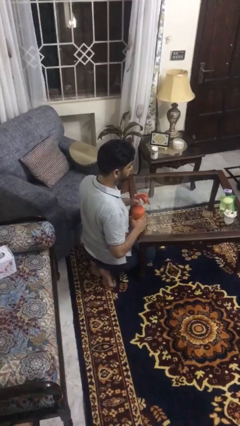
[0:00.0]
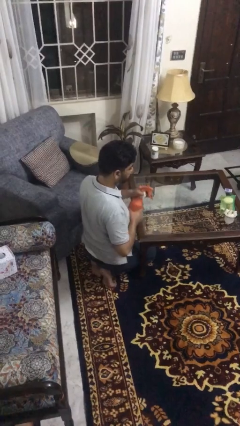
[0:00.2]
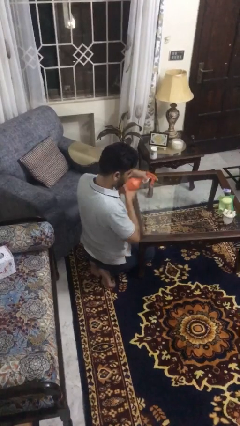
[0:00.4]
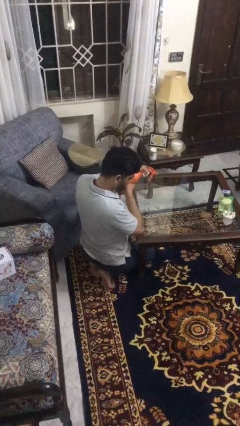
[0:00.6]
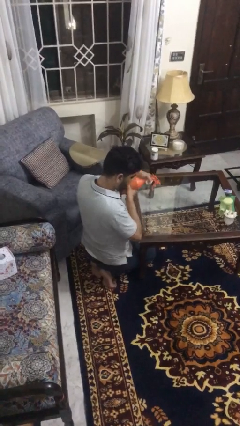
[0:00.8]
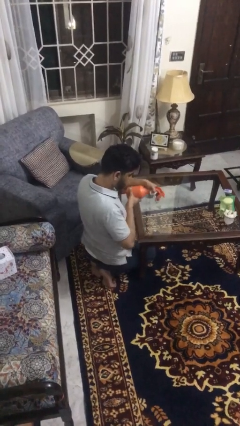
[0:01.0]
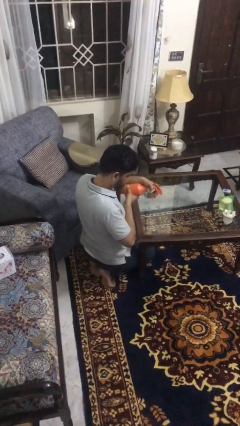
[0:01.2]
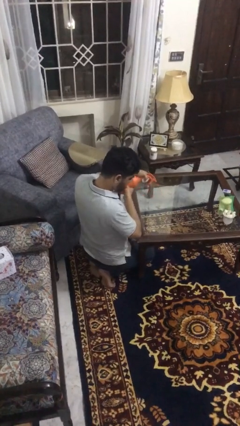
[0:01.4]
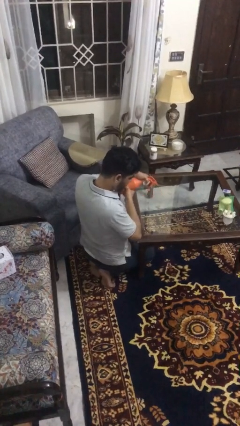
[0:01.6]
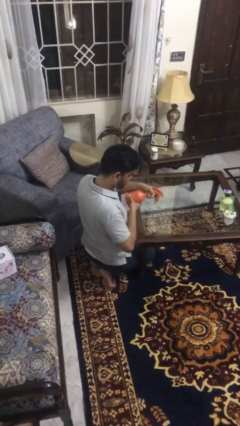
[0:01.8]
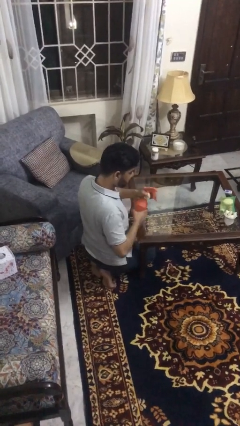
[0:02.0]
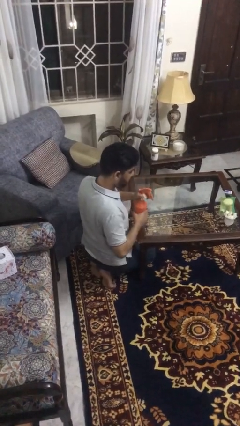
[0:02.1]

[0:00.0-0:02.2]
person sprays from bottle

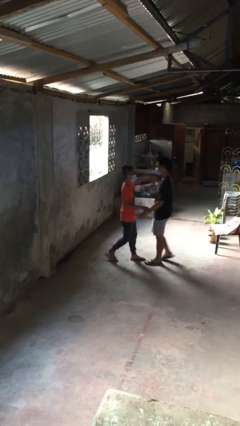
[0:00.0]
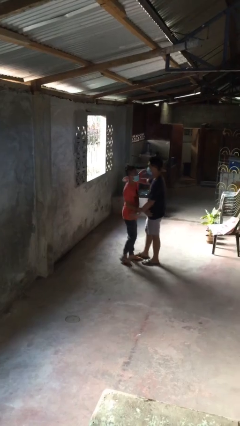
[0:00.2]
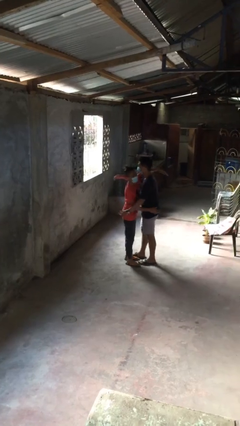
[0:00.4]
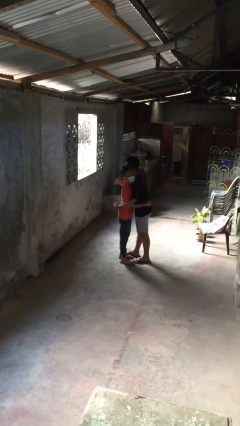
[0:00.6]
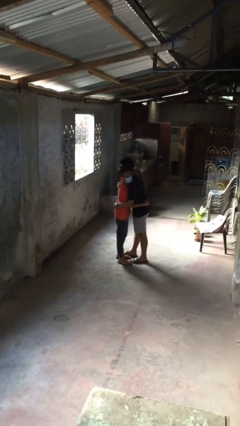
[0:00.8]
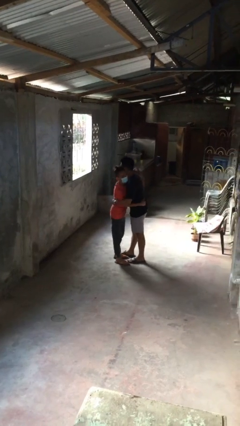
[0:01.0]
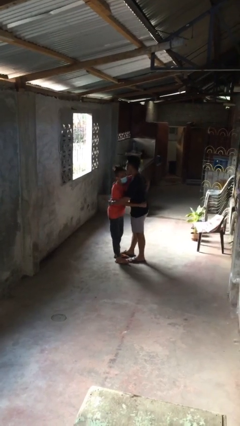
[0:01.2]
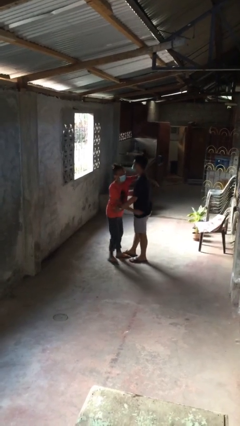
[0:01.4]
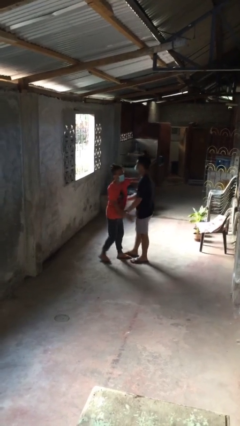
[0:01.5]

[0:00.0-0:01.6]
person embraces person

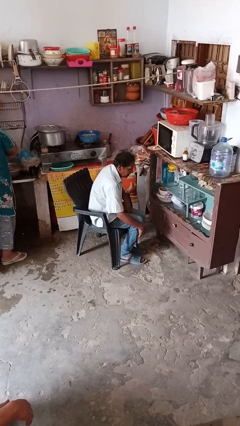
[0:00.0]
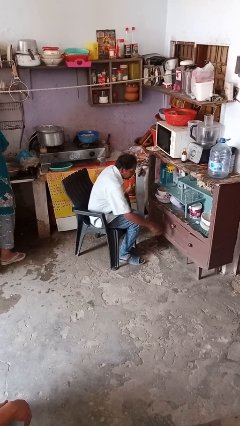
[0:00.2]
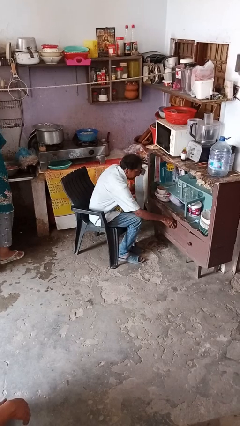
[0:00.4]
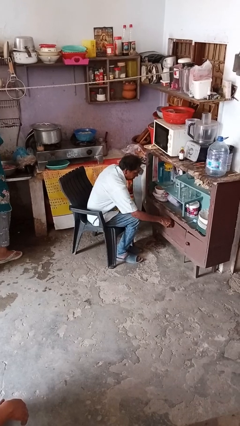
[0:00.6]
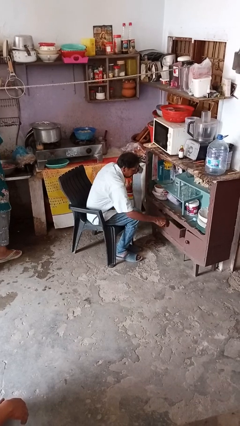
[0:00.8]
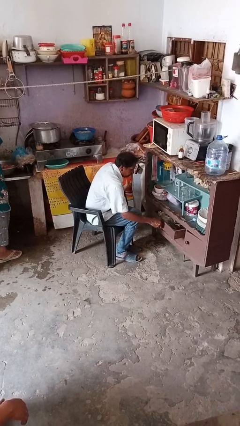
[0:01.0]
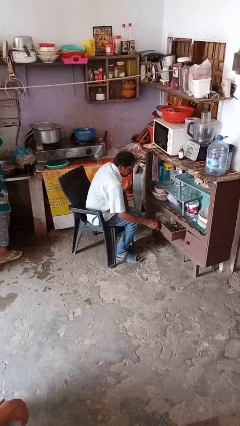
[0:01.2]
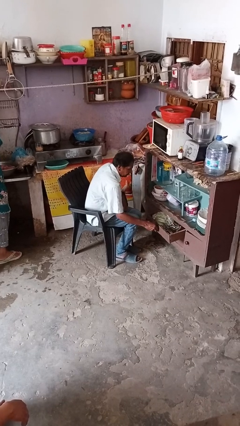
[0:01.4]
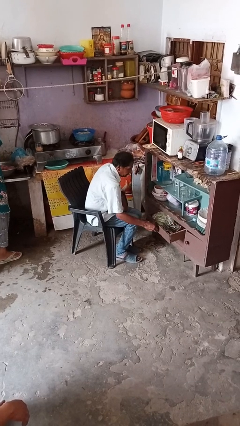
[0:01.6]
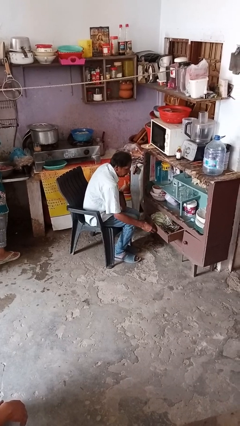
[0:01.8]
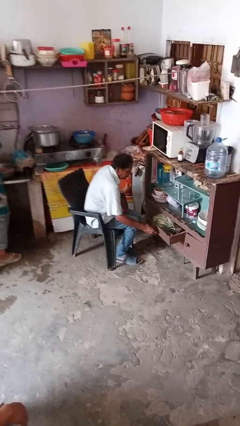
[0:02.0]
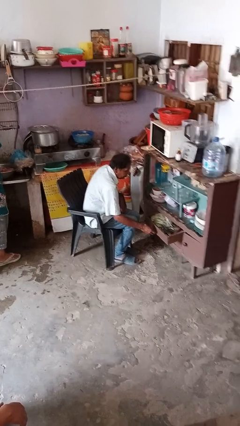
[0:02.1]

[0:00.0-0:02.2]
person opens dresser drawer

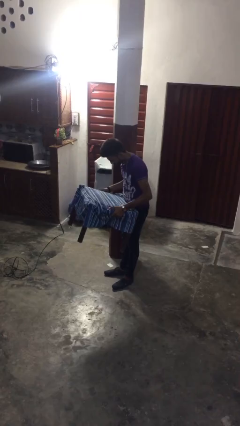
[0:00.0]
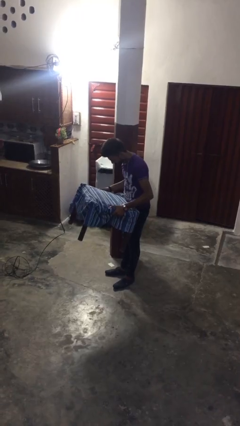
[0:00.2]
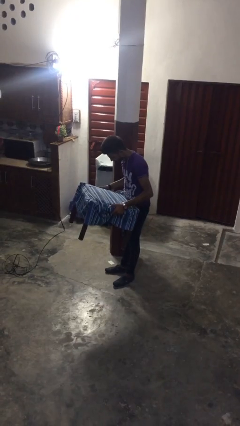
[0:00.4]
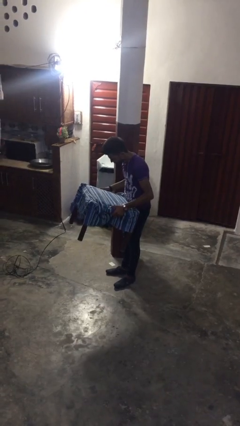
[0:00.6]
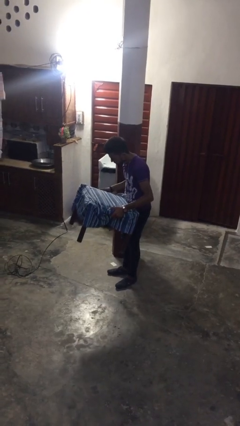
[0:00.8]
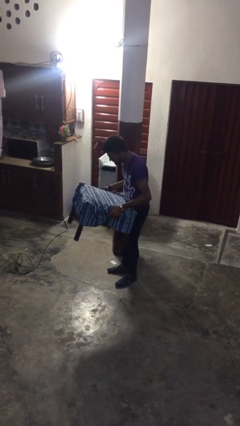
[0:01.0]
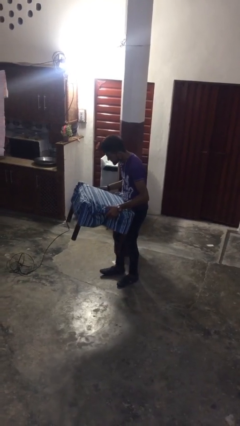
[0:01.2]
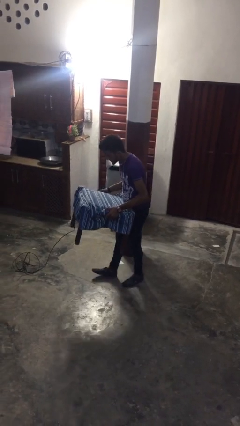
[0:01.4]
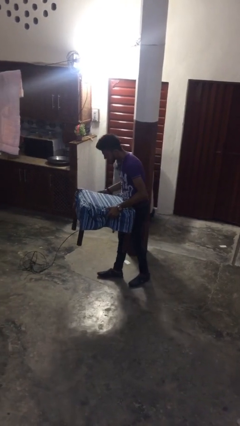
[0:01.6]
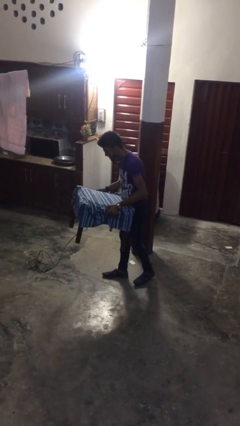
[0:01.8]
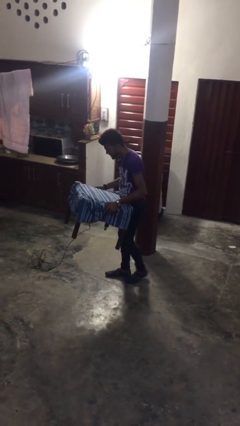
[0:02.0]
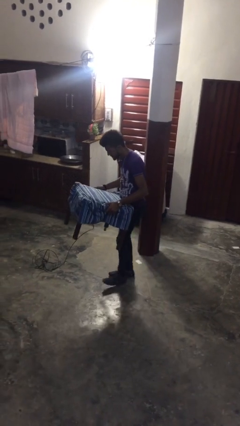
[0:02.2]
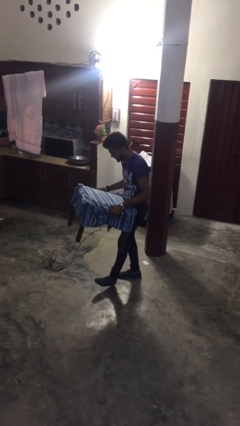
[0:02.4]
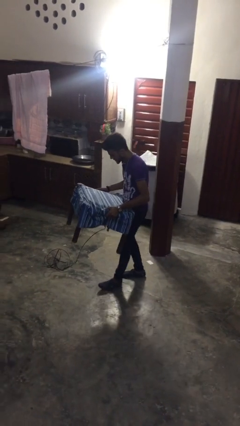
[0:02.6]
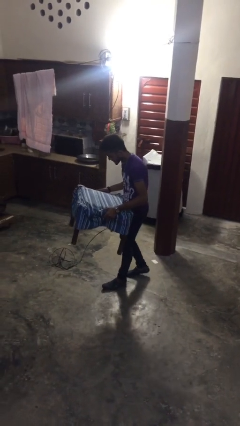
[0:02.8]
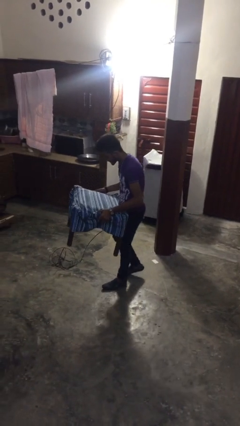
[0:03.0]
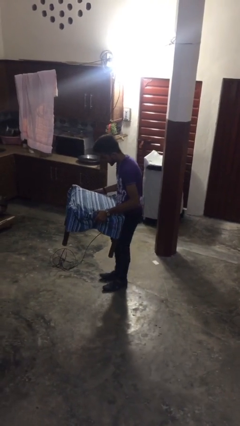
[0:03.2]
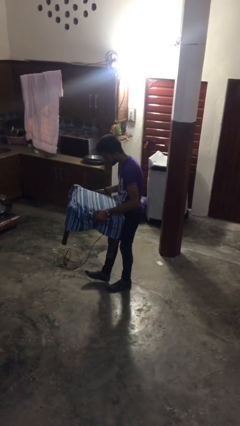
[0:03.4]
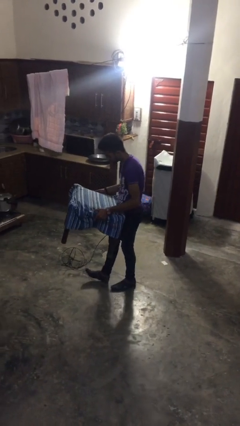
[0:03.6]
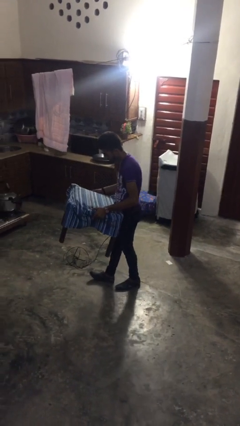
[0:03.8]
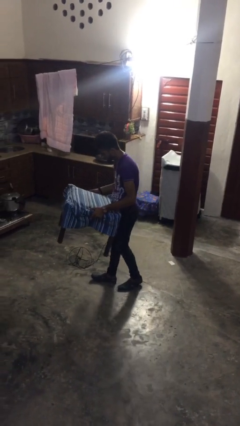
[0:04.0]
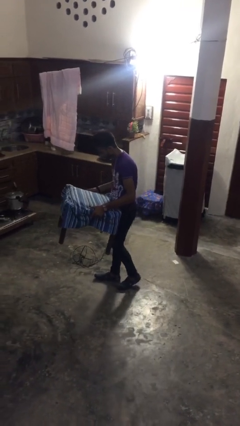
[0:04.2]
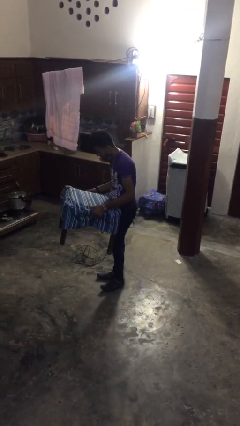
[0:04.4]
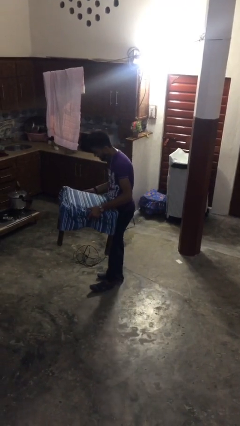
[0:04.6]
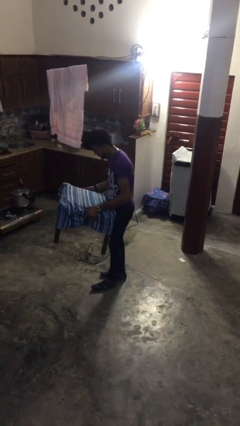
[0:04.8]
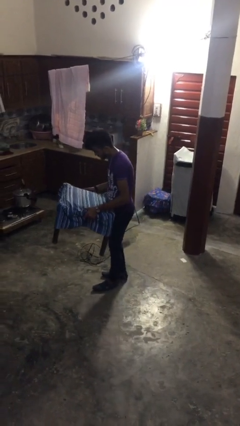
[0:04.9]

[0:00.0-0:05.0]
person carries heavy object

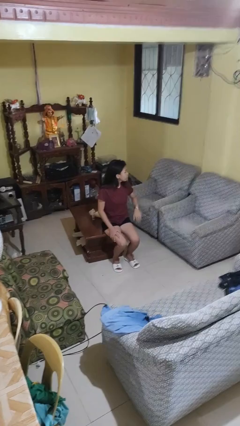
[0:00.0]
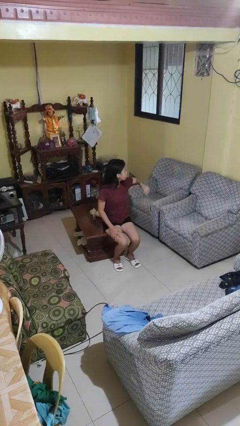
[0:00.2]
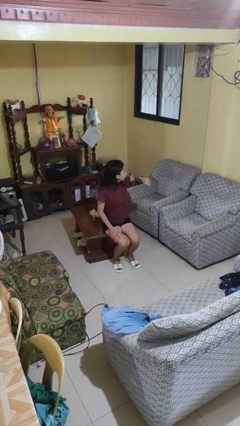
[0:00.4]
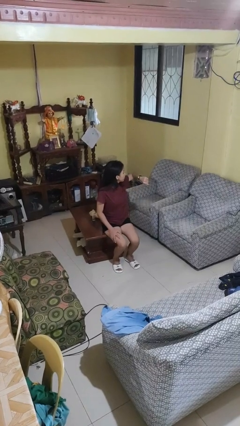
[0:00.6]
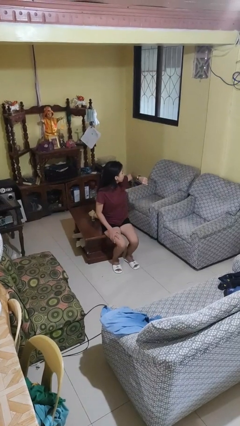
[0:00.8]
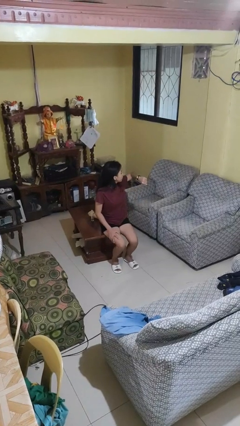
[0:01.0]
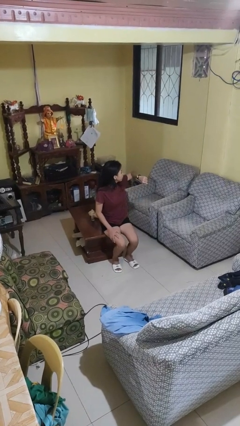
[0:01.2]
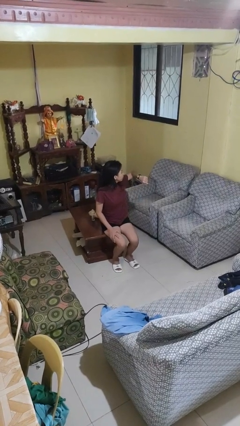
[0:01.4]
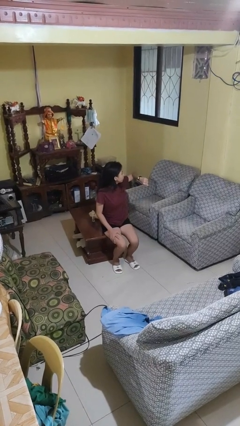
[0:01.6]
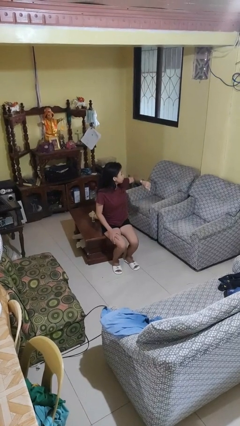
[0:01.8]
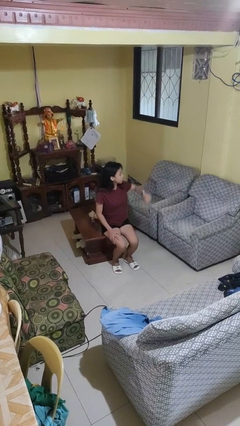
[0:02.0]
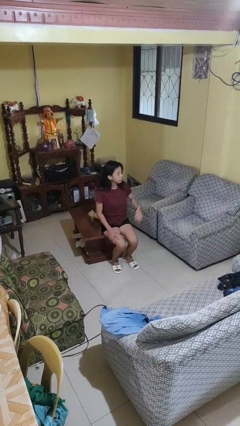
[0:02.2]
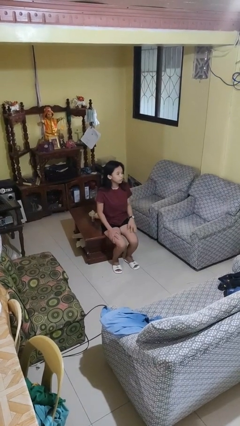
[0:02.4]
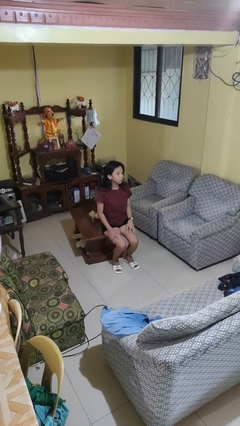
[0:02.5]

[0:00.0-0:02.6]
person looks at wristwatch

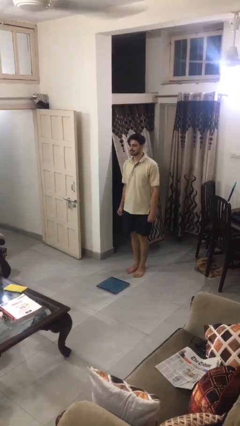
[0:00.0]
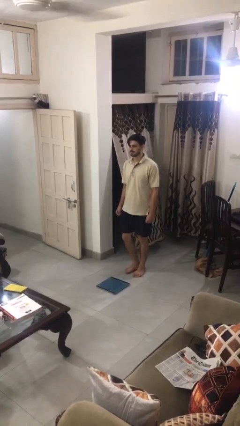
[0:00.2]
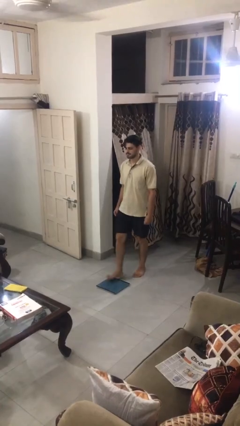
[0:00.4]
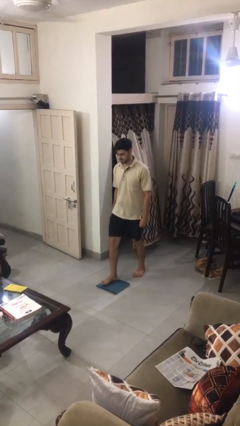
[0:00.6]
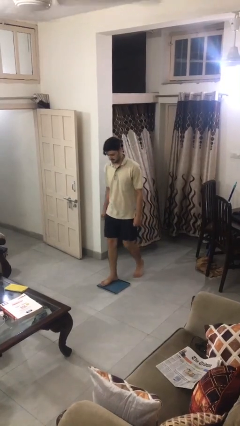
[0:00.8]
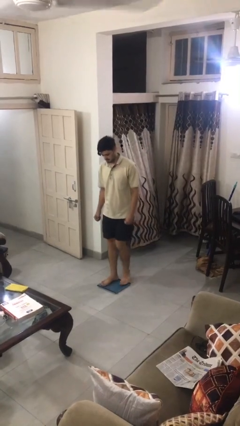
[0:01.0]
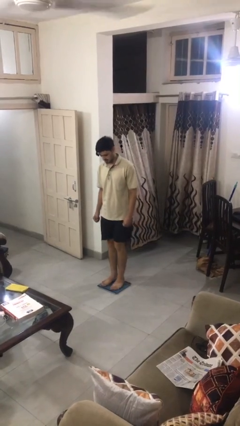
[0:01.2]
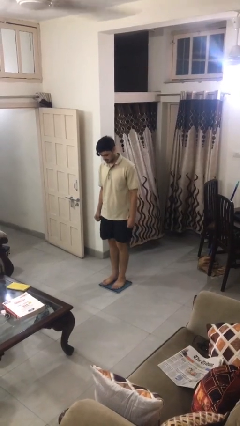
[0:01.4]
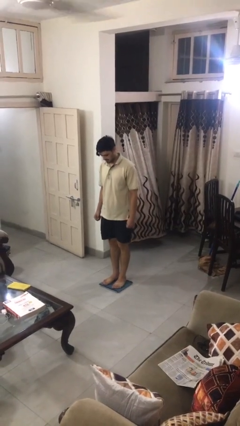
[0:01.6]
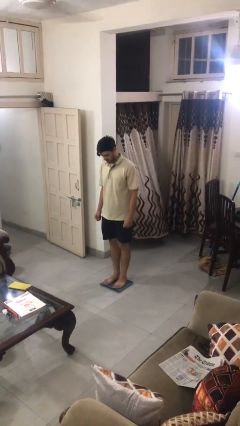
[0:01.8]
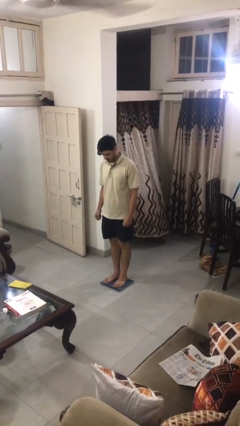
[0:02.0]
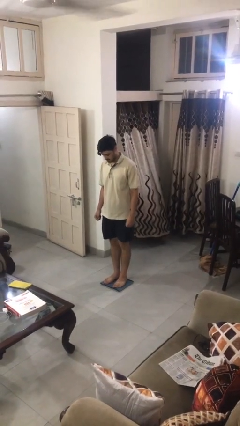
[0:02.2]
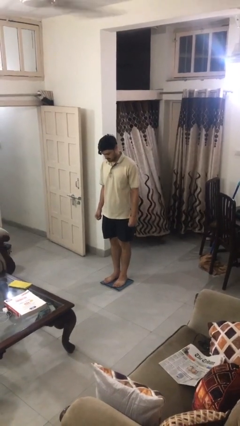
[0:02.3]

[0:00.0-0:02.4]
person uses bodyweight scale

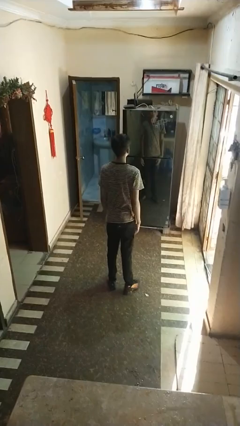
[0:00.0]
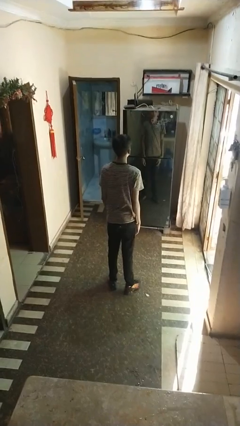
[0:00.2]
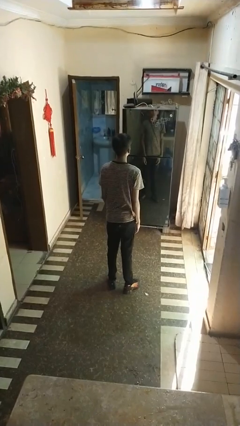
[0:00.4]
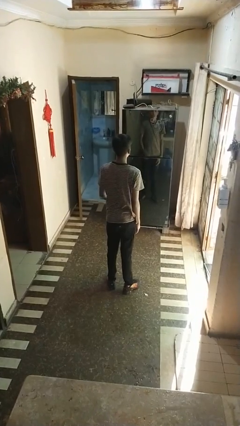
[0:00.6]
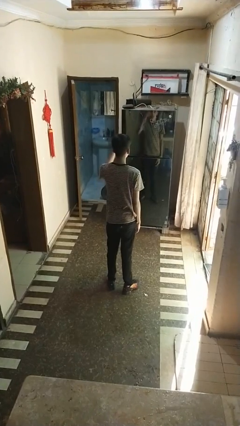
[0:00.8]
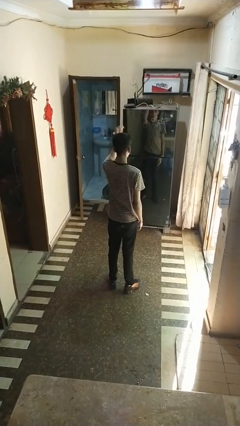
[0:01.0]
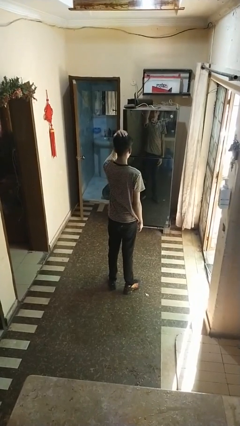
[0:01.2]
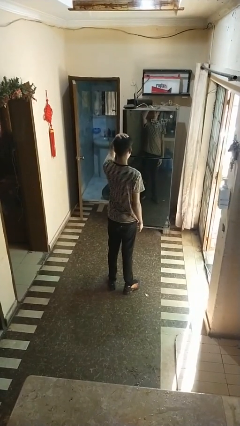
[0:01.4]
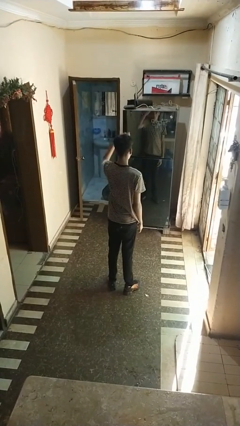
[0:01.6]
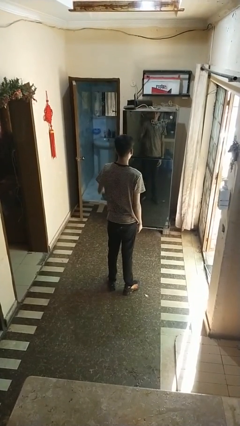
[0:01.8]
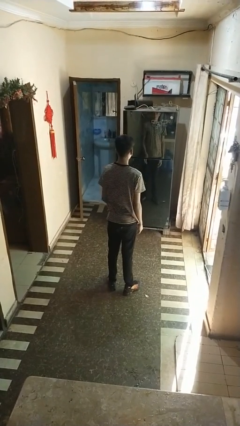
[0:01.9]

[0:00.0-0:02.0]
person pats head
